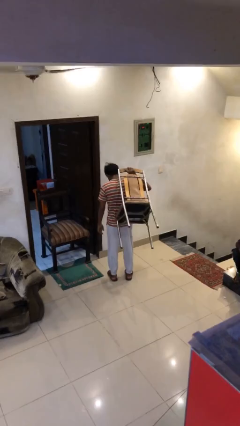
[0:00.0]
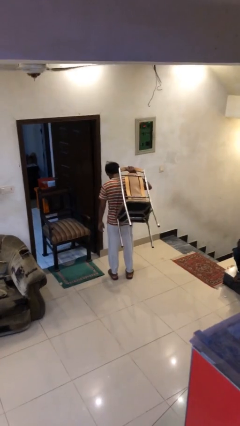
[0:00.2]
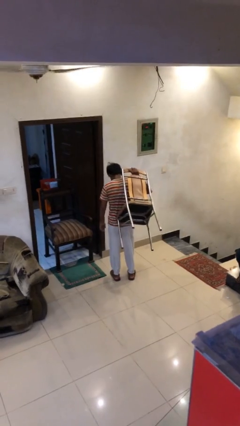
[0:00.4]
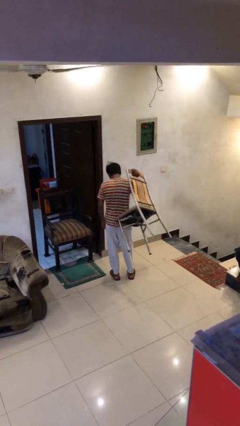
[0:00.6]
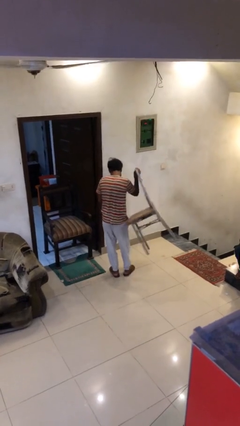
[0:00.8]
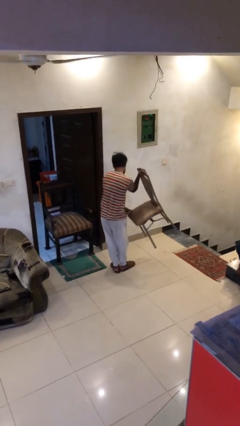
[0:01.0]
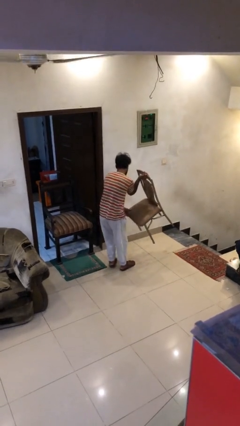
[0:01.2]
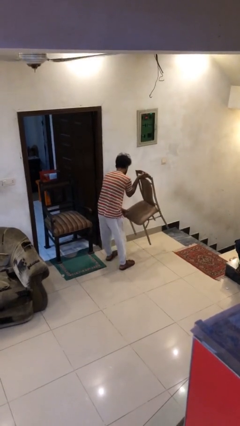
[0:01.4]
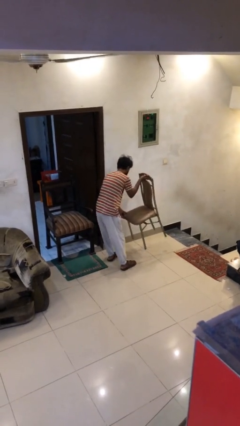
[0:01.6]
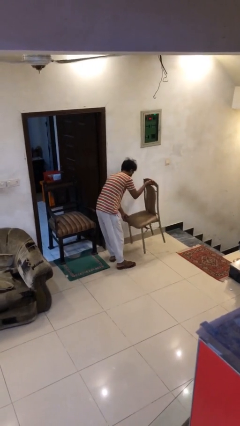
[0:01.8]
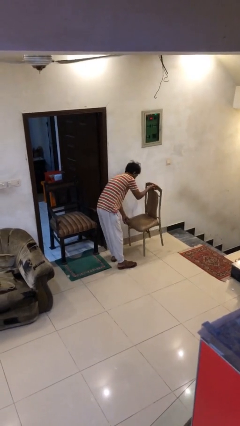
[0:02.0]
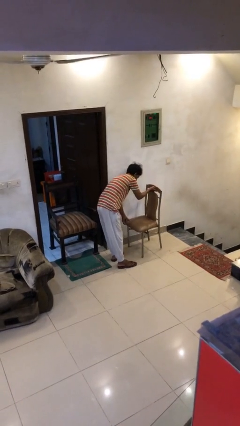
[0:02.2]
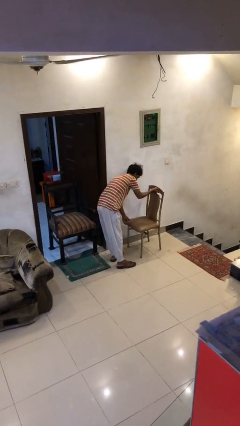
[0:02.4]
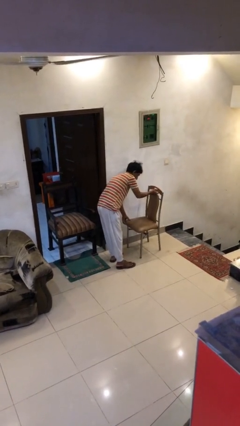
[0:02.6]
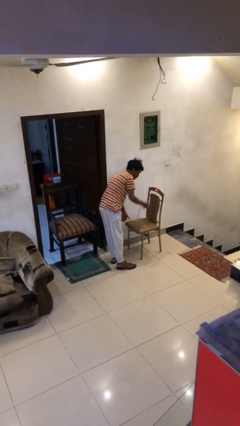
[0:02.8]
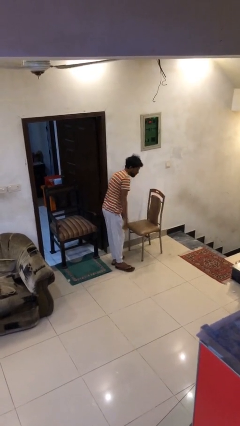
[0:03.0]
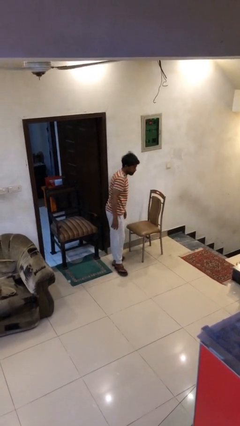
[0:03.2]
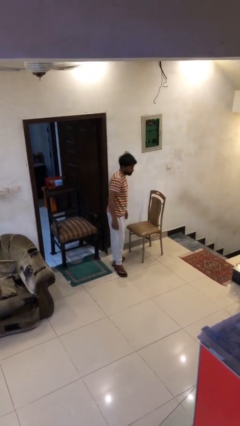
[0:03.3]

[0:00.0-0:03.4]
person puts down object on floor

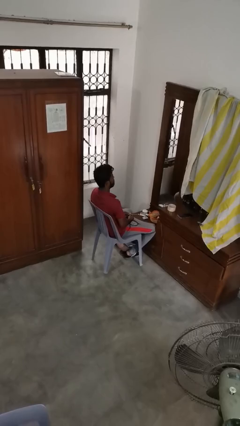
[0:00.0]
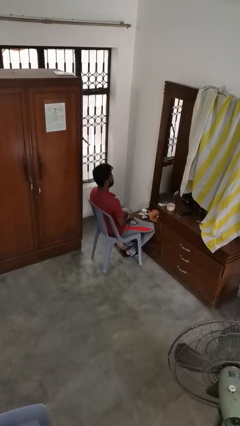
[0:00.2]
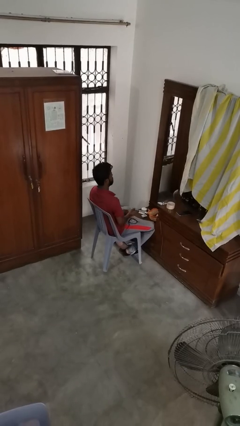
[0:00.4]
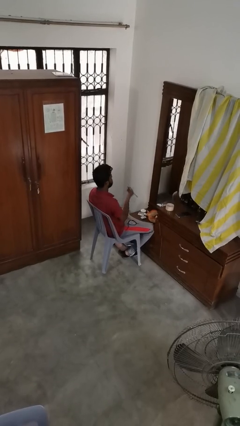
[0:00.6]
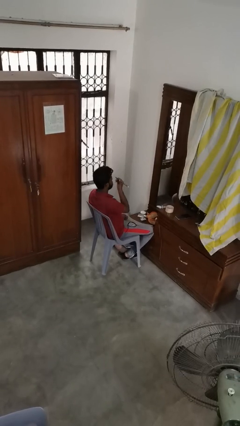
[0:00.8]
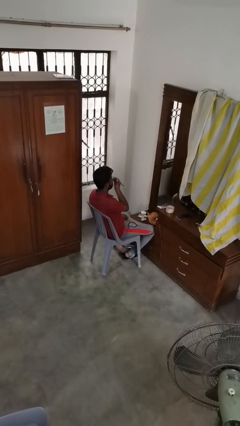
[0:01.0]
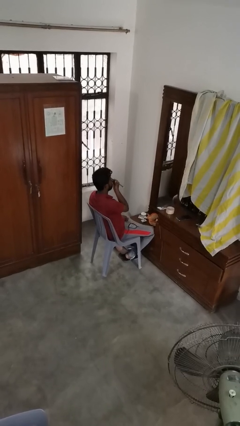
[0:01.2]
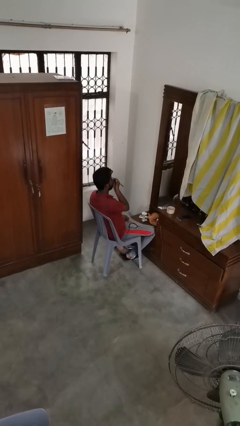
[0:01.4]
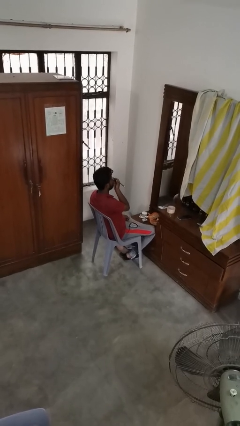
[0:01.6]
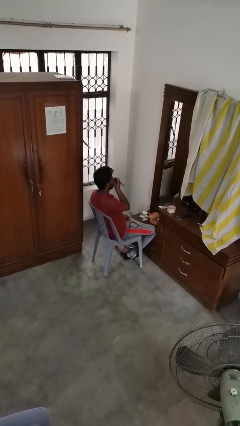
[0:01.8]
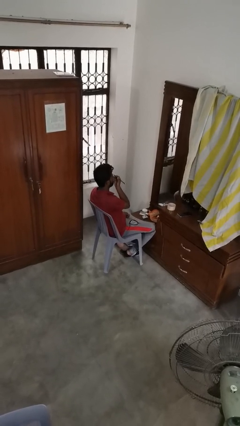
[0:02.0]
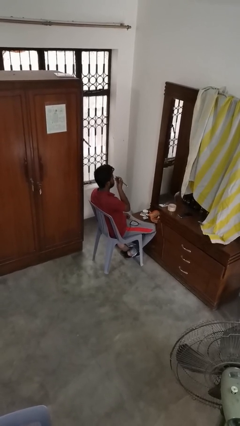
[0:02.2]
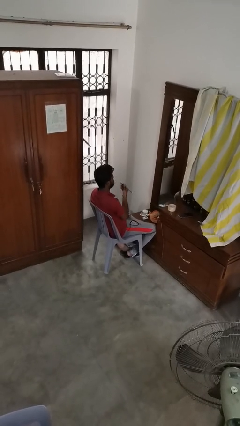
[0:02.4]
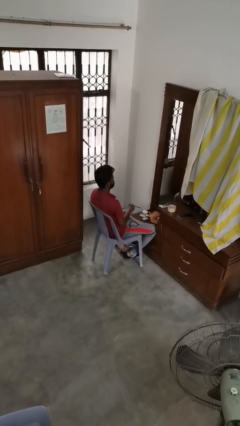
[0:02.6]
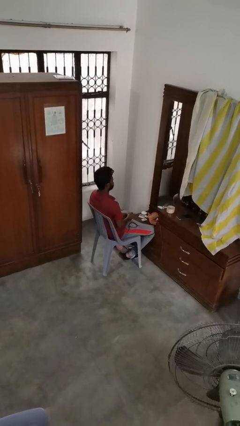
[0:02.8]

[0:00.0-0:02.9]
person applies eye makeup

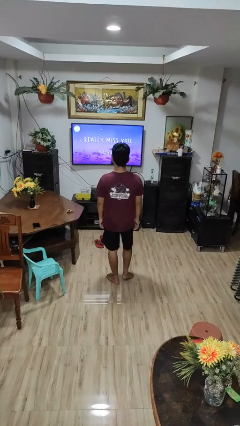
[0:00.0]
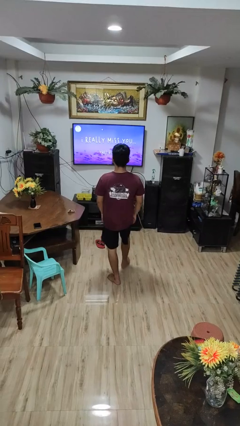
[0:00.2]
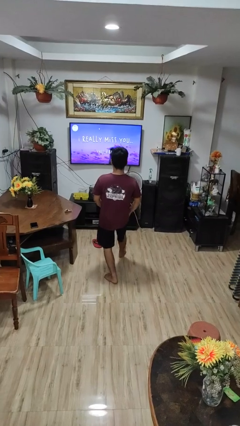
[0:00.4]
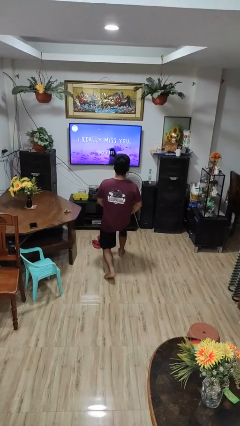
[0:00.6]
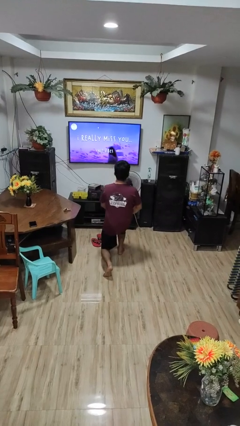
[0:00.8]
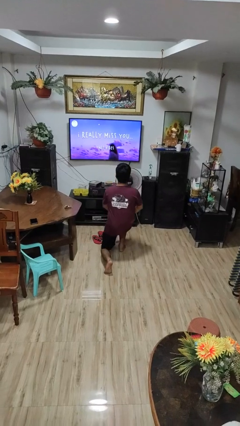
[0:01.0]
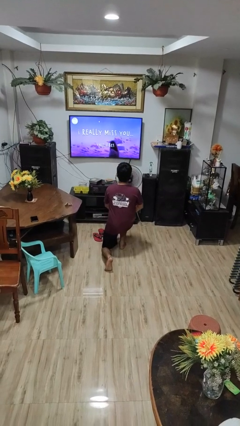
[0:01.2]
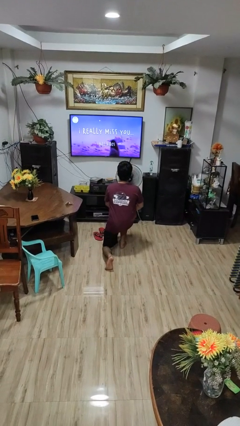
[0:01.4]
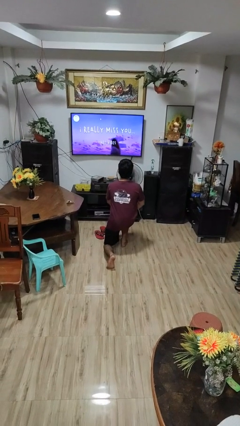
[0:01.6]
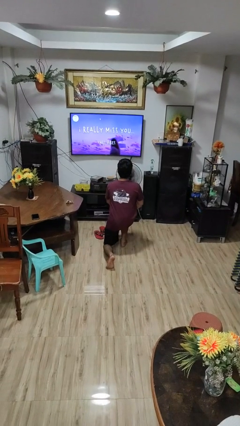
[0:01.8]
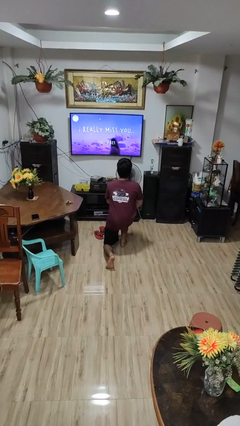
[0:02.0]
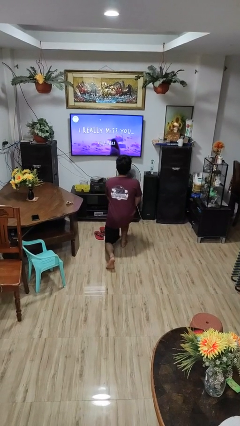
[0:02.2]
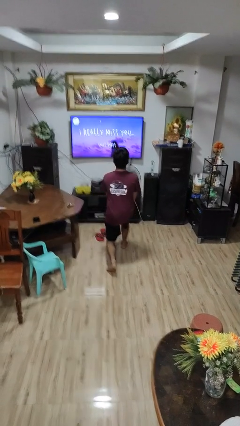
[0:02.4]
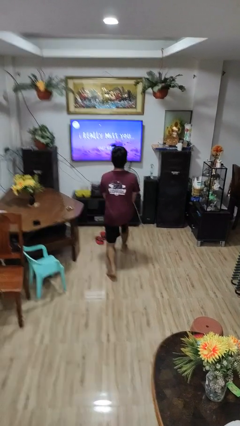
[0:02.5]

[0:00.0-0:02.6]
person exercises with lunges

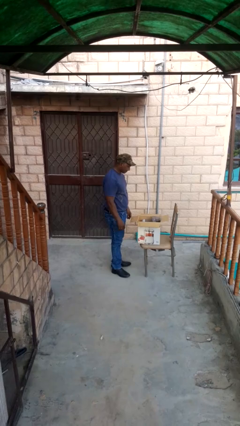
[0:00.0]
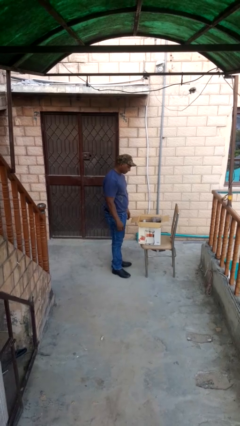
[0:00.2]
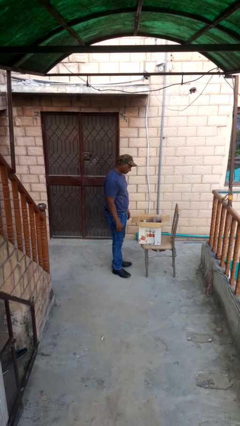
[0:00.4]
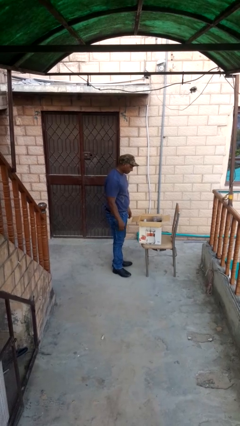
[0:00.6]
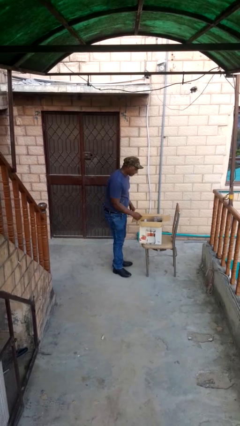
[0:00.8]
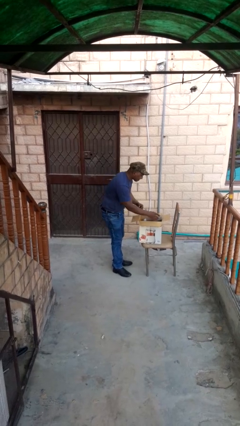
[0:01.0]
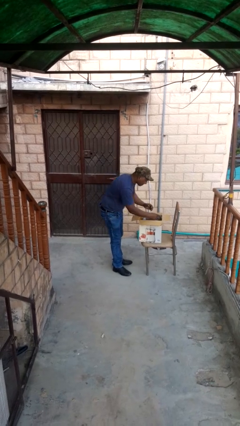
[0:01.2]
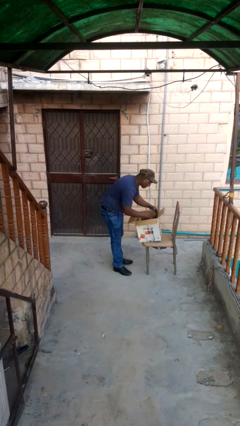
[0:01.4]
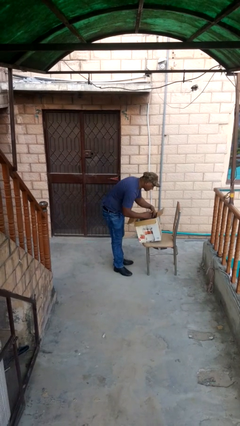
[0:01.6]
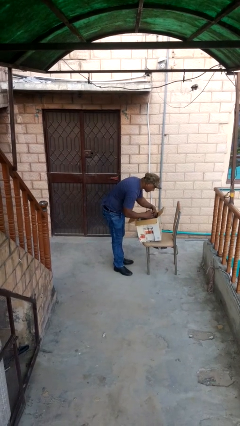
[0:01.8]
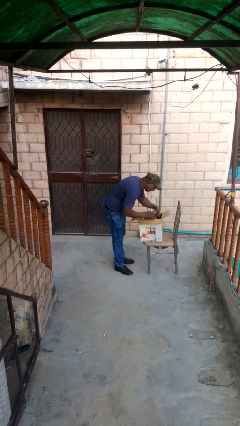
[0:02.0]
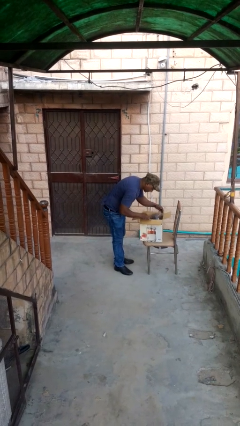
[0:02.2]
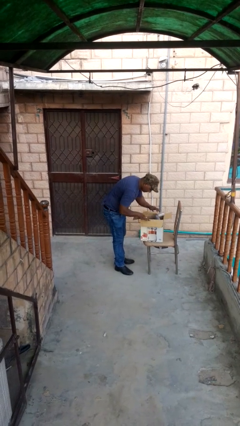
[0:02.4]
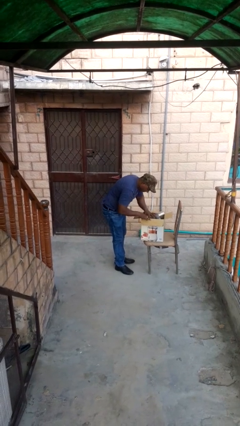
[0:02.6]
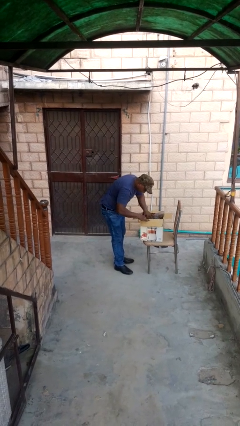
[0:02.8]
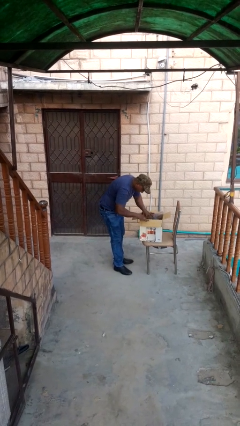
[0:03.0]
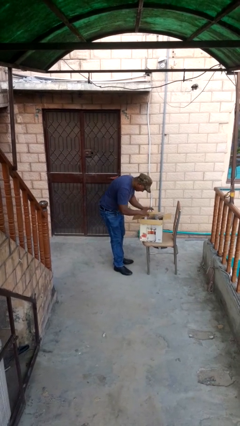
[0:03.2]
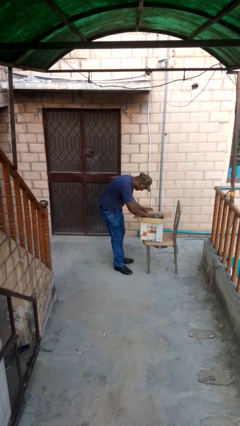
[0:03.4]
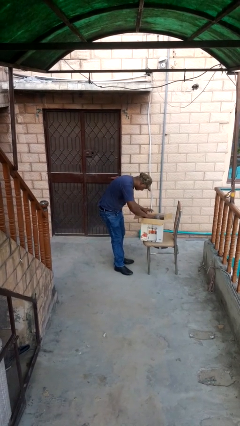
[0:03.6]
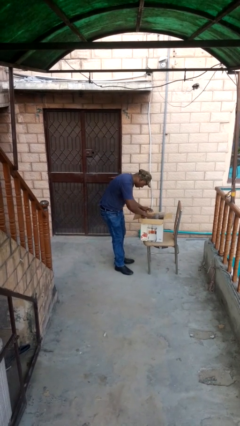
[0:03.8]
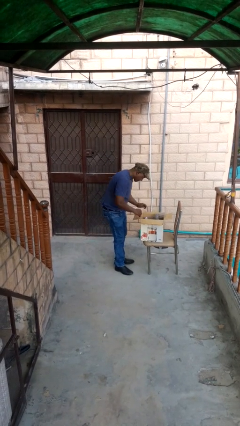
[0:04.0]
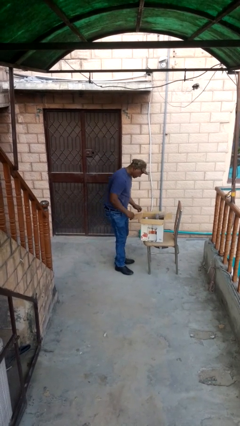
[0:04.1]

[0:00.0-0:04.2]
person searches in box

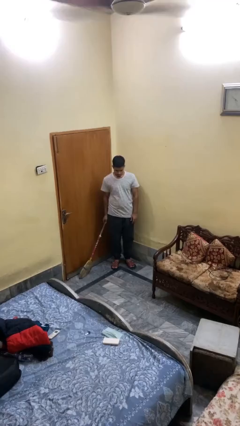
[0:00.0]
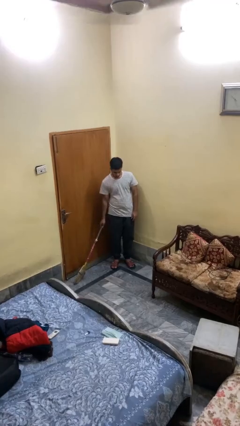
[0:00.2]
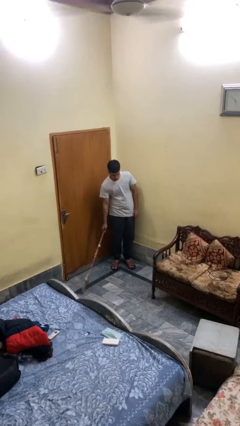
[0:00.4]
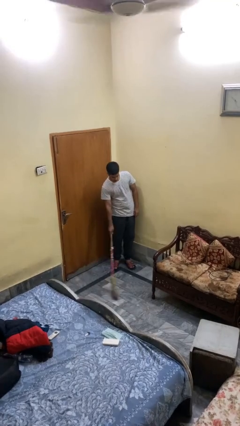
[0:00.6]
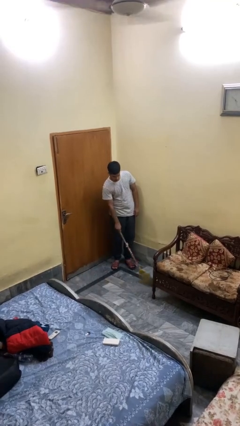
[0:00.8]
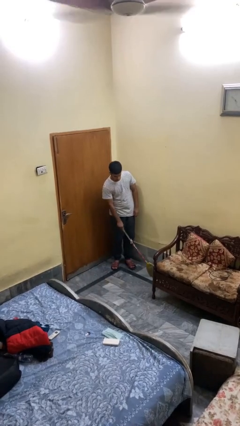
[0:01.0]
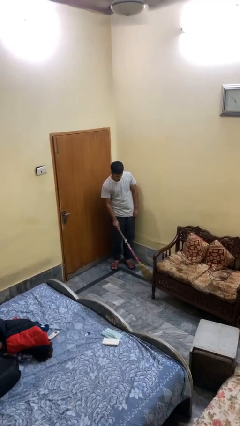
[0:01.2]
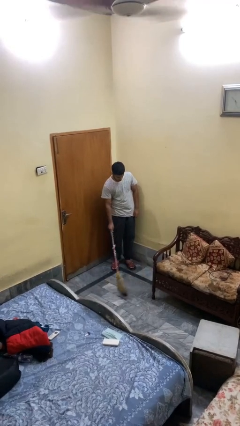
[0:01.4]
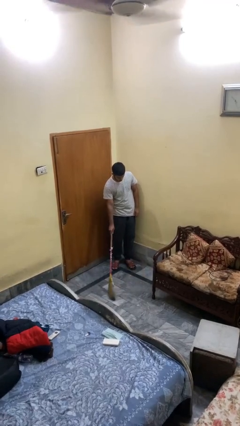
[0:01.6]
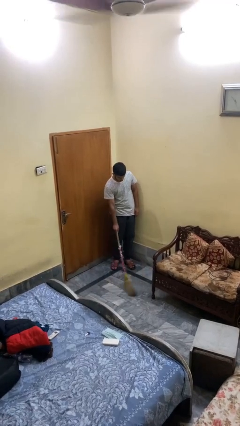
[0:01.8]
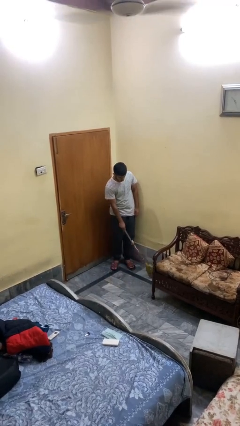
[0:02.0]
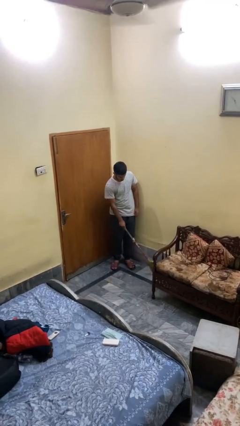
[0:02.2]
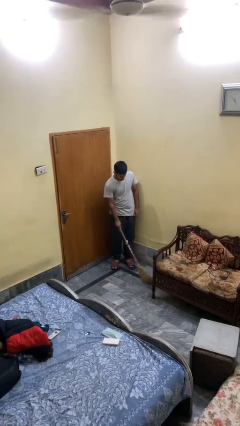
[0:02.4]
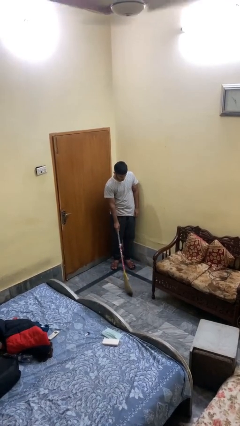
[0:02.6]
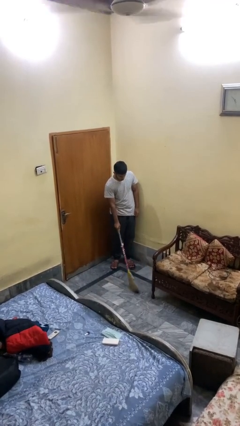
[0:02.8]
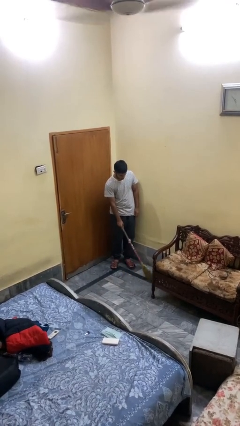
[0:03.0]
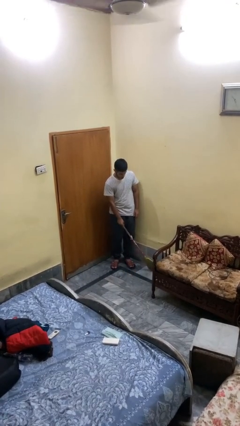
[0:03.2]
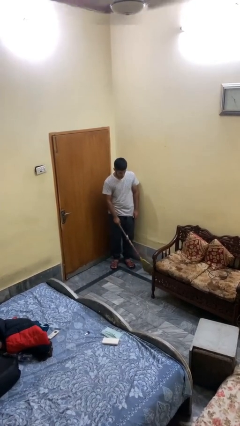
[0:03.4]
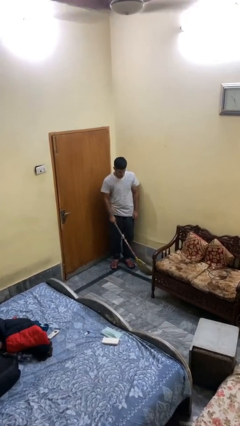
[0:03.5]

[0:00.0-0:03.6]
person sweeps floor

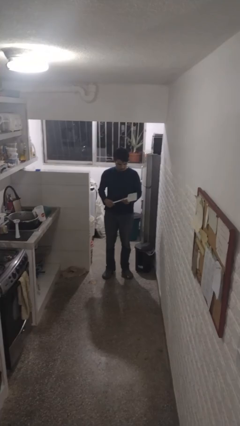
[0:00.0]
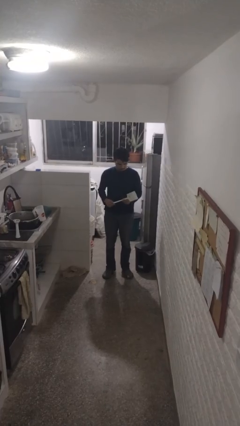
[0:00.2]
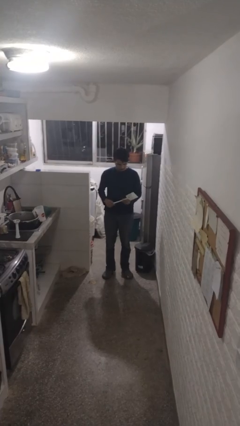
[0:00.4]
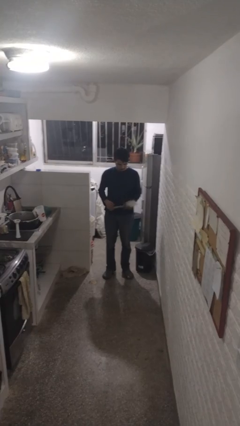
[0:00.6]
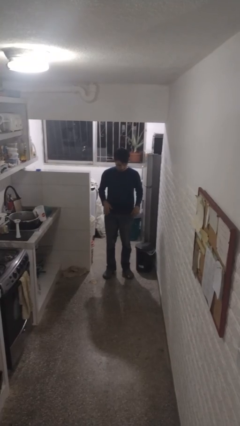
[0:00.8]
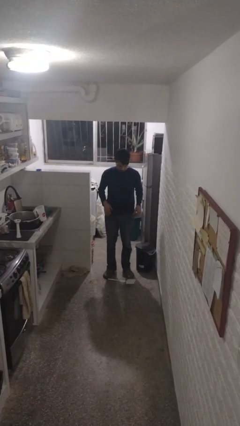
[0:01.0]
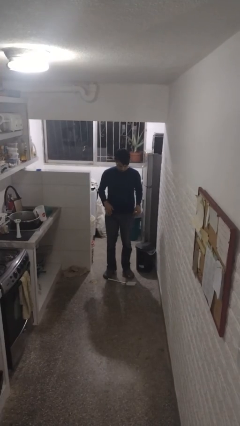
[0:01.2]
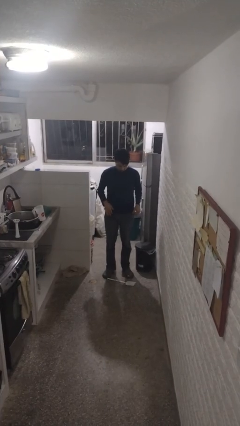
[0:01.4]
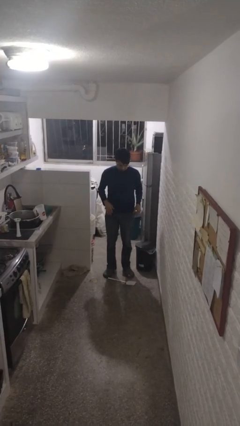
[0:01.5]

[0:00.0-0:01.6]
person drops object
